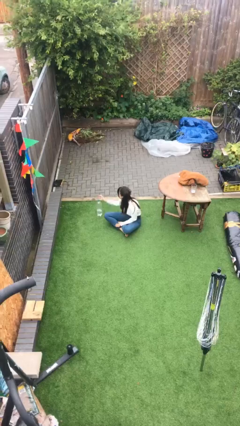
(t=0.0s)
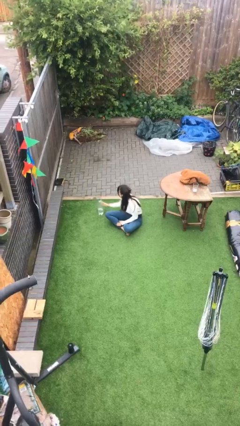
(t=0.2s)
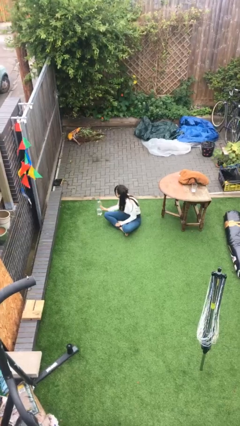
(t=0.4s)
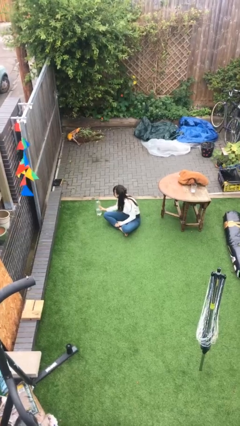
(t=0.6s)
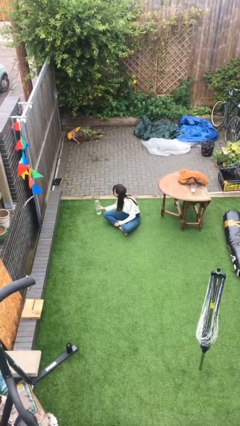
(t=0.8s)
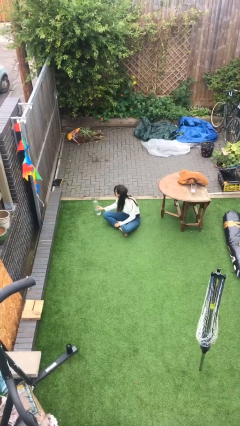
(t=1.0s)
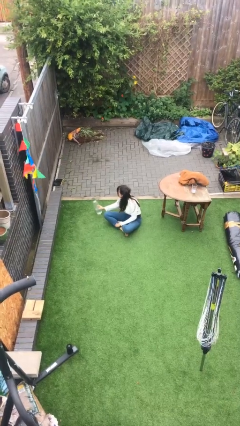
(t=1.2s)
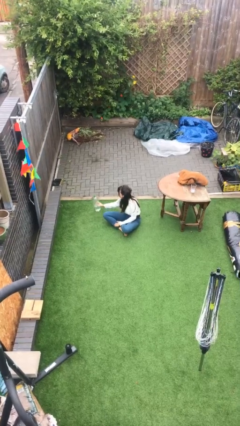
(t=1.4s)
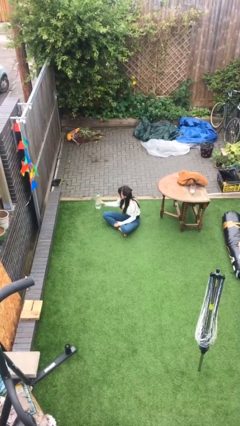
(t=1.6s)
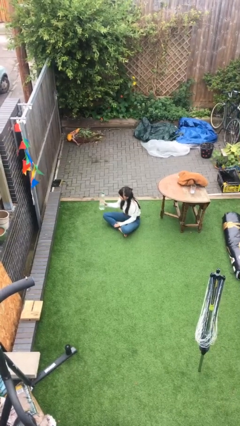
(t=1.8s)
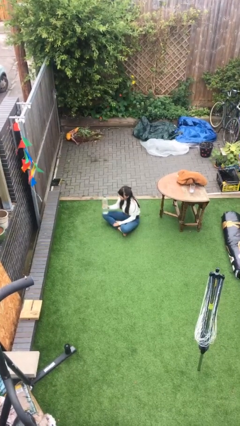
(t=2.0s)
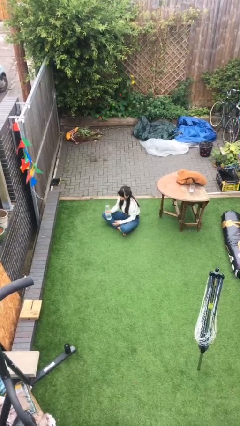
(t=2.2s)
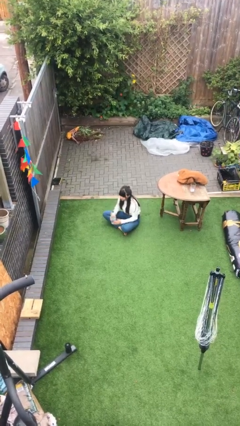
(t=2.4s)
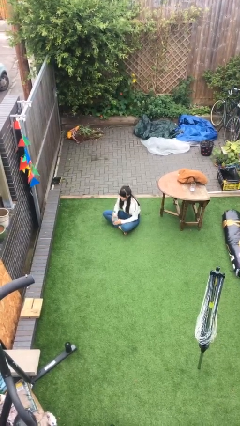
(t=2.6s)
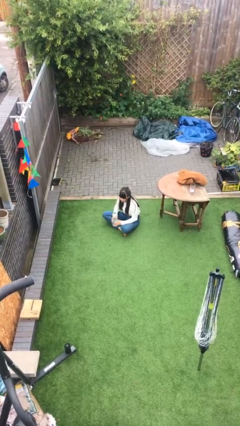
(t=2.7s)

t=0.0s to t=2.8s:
person picks up object from floor

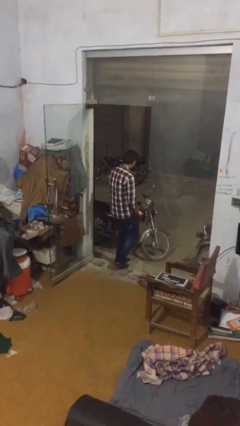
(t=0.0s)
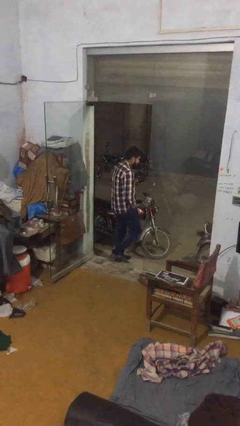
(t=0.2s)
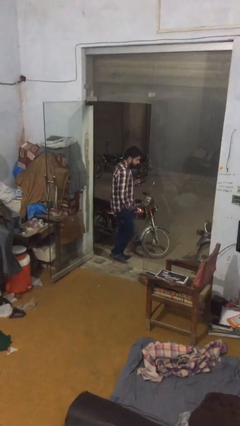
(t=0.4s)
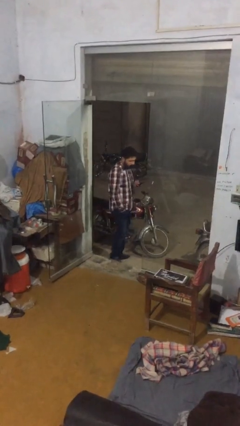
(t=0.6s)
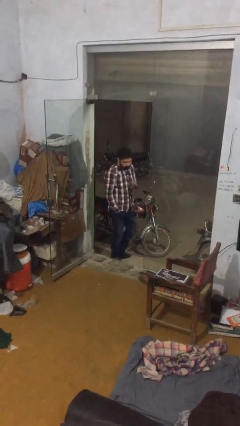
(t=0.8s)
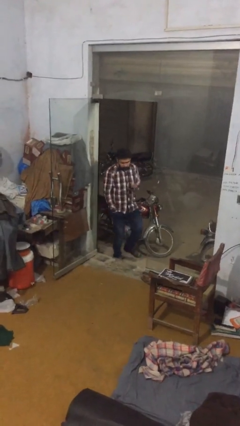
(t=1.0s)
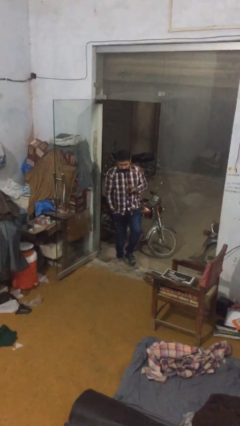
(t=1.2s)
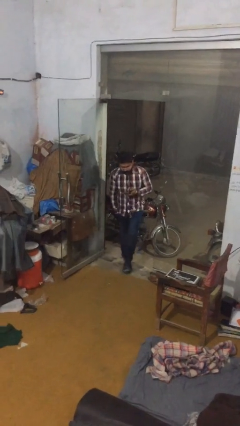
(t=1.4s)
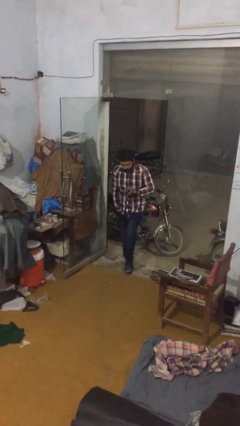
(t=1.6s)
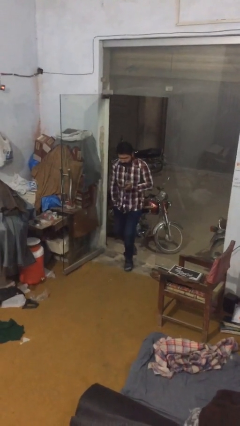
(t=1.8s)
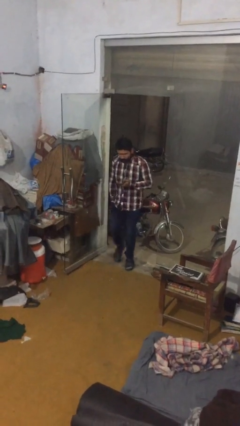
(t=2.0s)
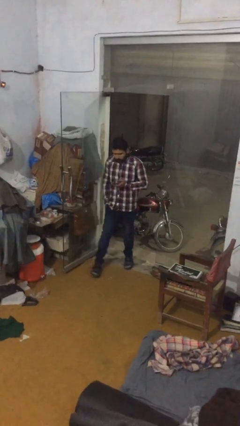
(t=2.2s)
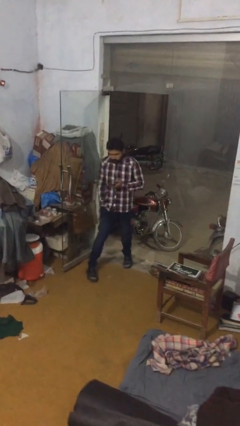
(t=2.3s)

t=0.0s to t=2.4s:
person enters scene through structure

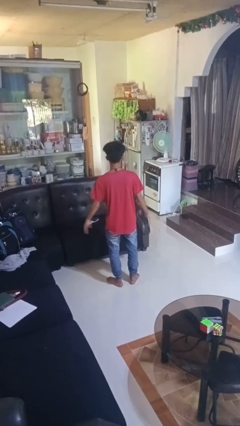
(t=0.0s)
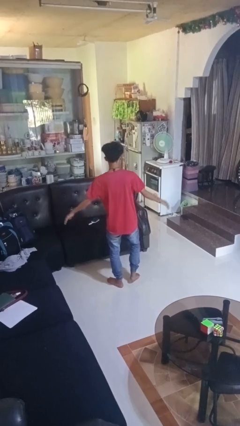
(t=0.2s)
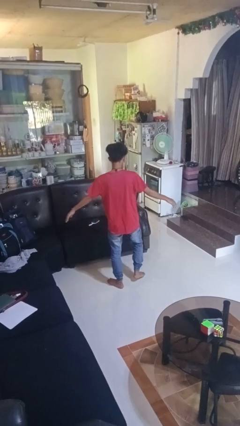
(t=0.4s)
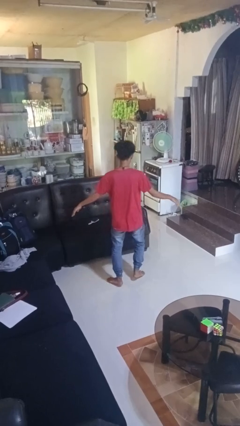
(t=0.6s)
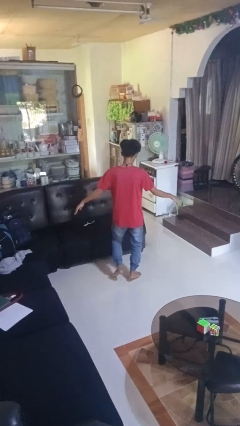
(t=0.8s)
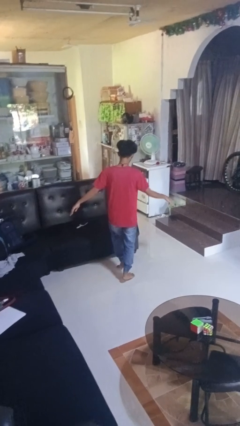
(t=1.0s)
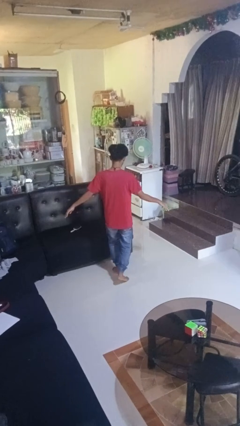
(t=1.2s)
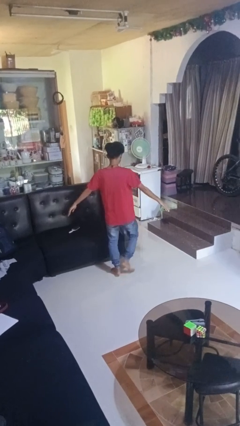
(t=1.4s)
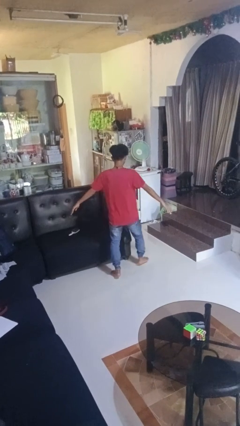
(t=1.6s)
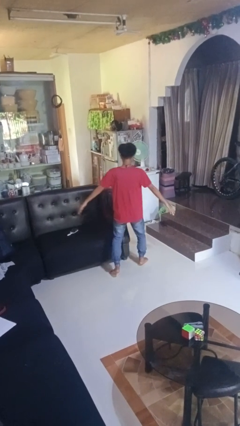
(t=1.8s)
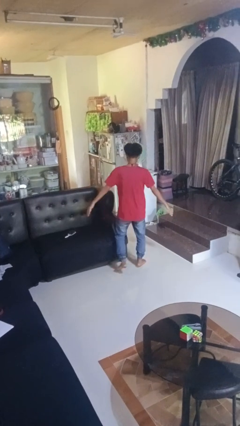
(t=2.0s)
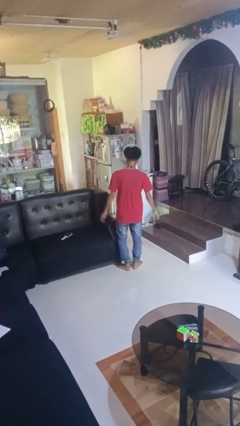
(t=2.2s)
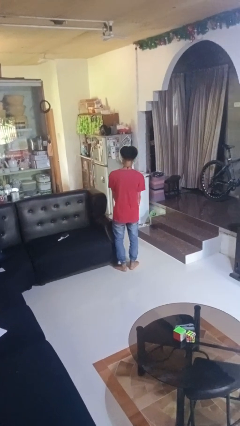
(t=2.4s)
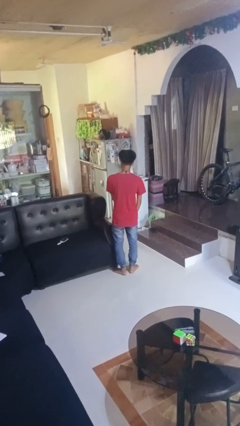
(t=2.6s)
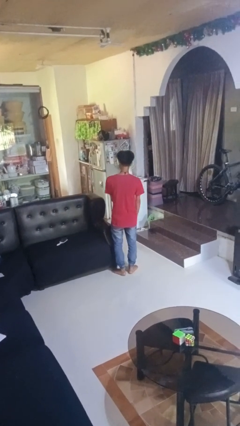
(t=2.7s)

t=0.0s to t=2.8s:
person walks tiptoe

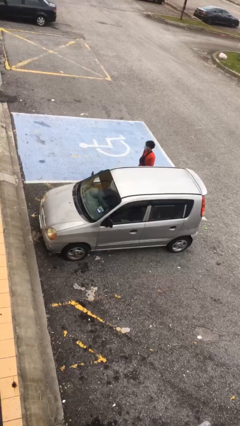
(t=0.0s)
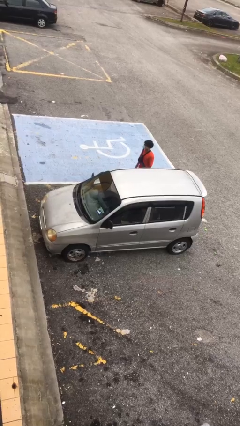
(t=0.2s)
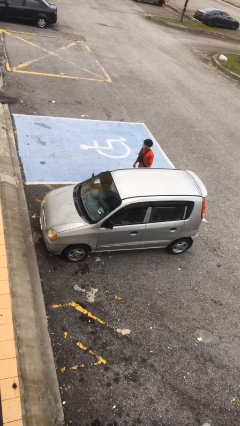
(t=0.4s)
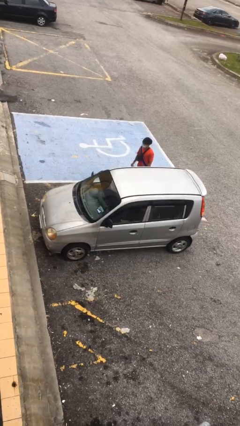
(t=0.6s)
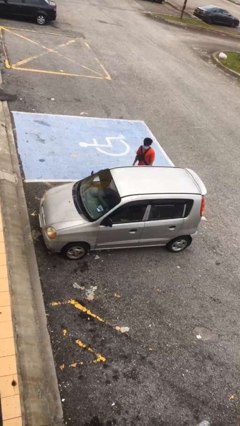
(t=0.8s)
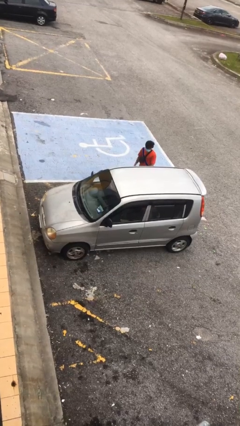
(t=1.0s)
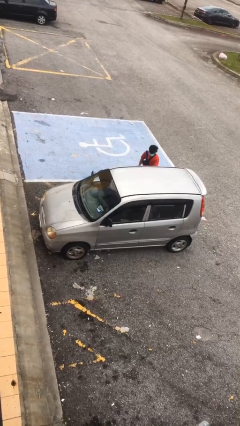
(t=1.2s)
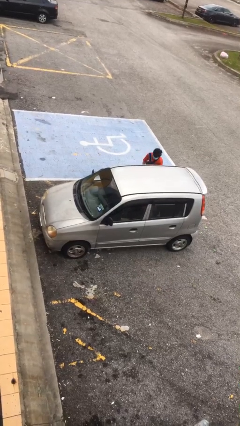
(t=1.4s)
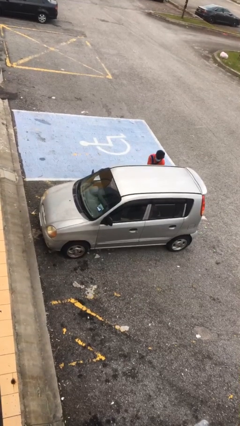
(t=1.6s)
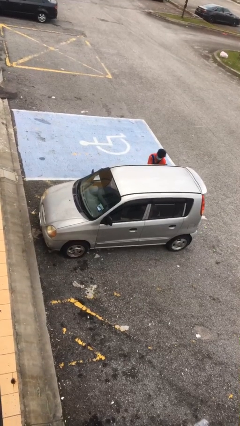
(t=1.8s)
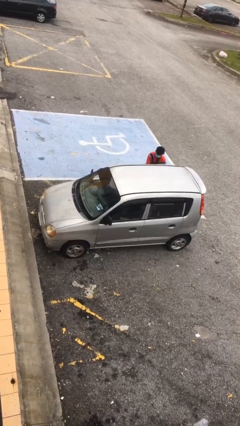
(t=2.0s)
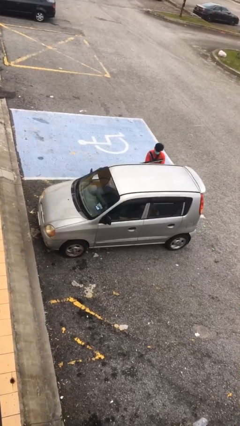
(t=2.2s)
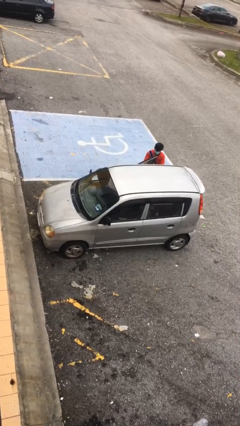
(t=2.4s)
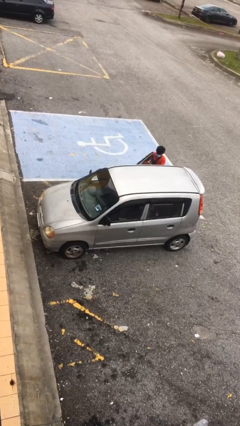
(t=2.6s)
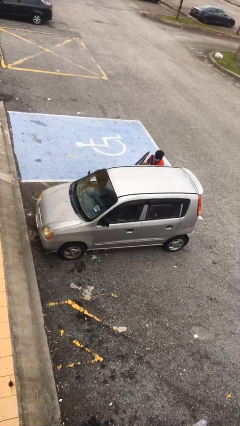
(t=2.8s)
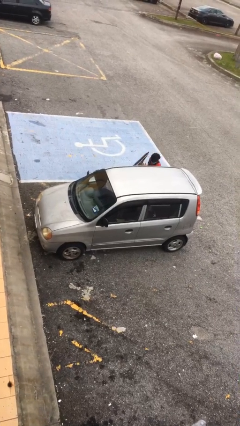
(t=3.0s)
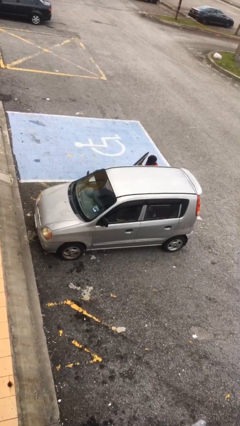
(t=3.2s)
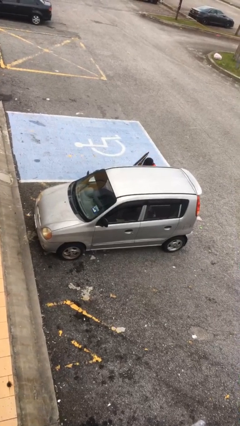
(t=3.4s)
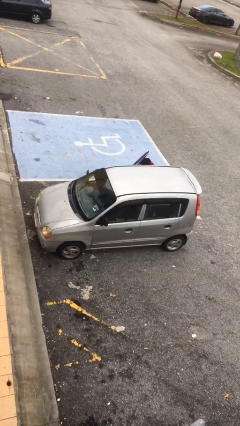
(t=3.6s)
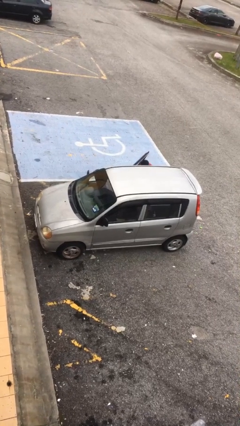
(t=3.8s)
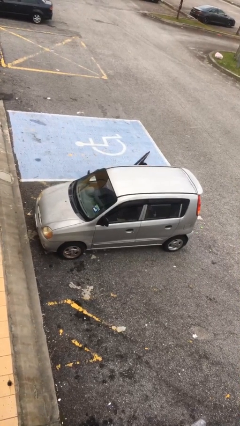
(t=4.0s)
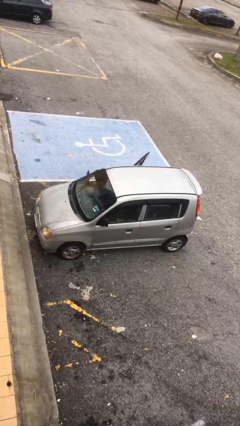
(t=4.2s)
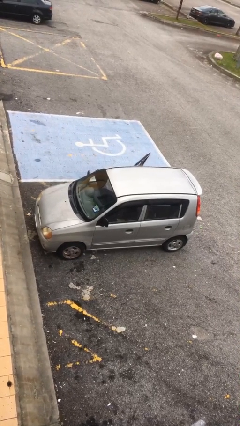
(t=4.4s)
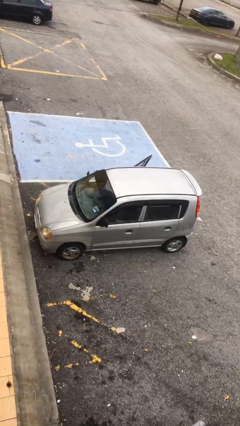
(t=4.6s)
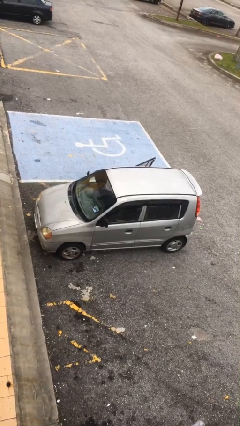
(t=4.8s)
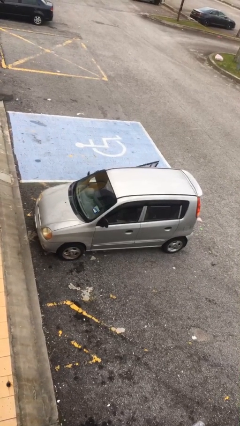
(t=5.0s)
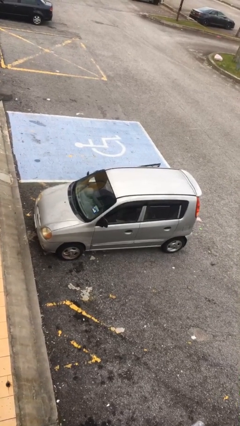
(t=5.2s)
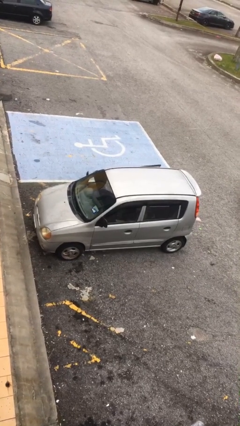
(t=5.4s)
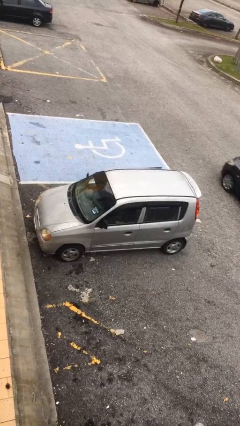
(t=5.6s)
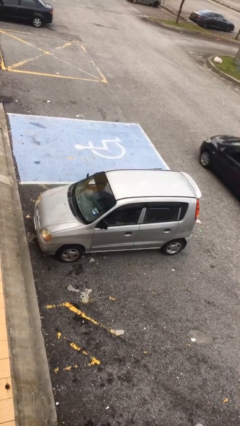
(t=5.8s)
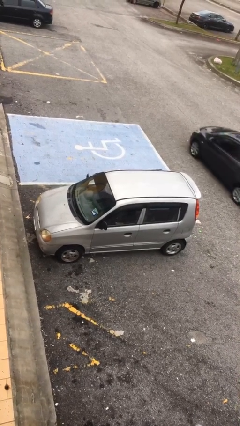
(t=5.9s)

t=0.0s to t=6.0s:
car picks up person

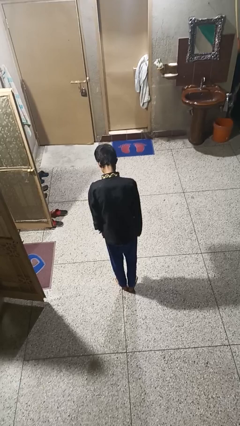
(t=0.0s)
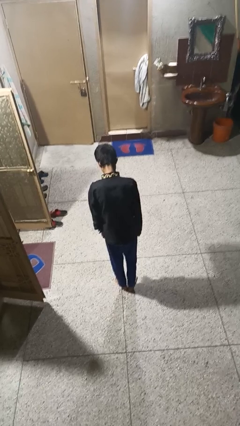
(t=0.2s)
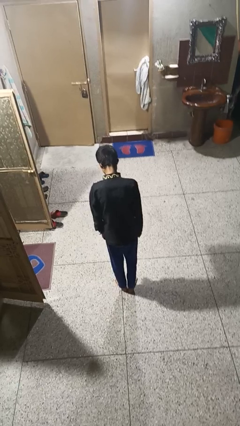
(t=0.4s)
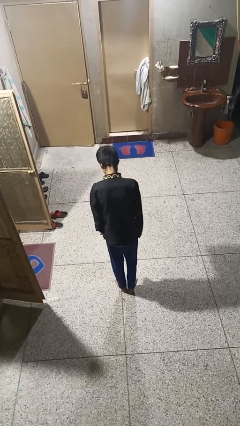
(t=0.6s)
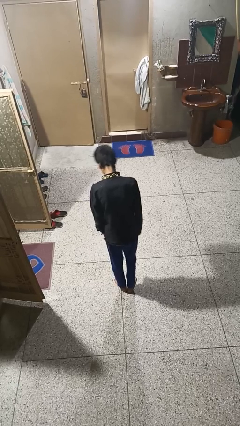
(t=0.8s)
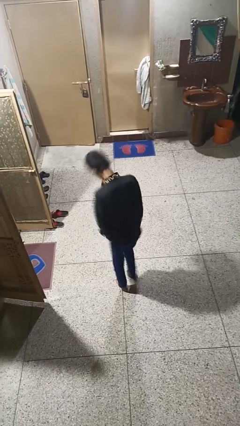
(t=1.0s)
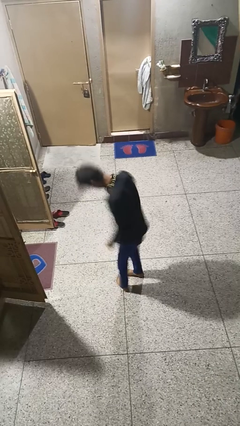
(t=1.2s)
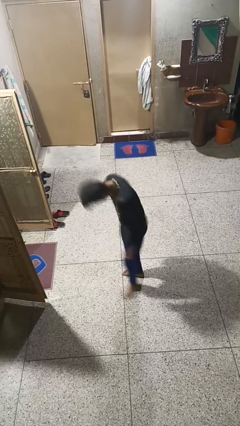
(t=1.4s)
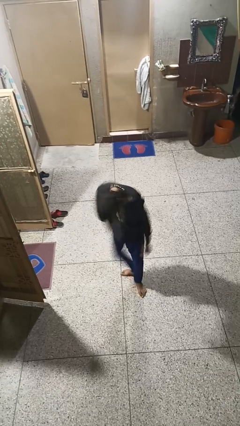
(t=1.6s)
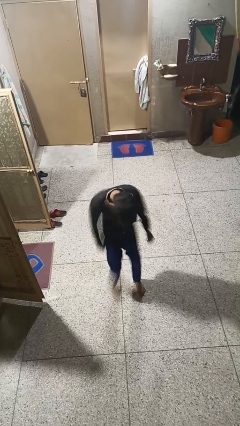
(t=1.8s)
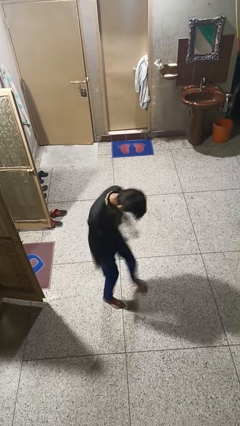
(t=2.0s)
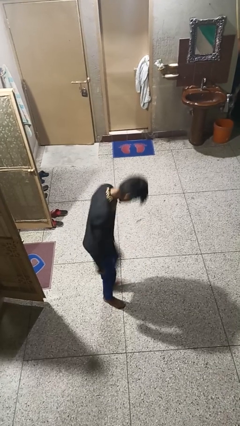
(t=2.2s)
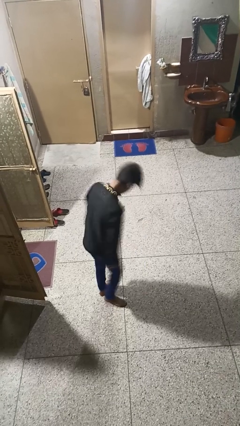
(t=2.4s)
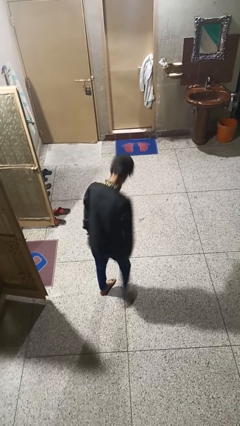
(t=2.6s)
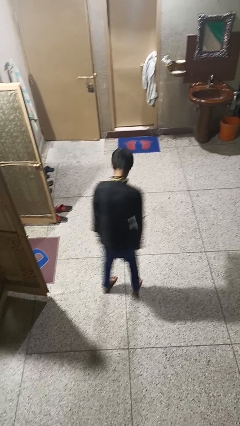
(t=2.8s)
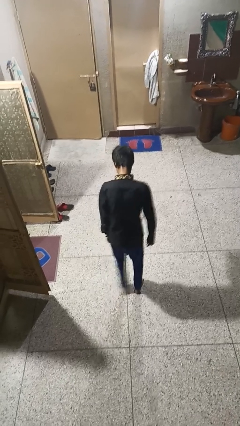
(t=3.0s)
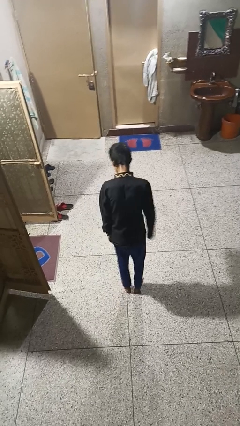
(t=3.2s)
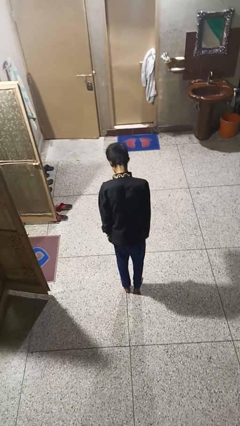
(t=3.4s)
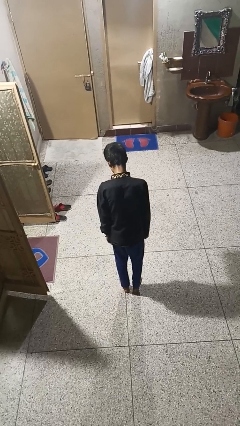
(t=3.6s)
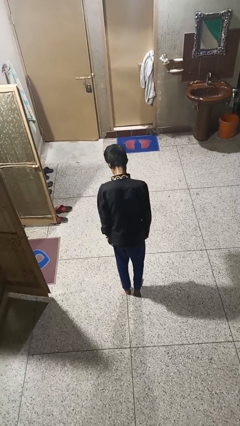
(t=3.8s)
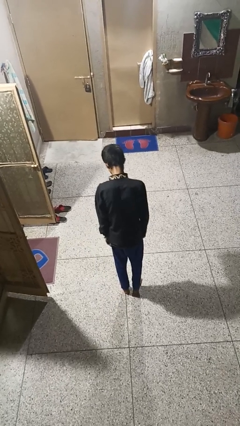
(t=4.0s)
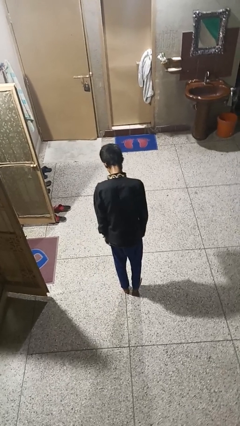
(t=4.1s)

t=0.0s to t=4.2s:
person twirls
